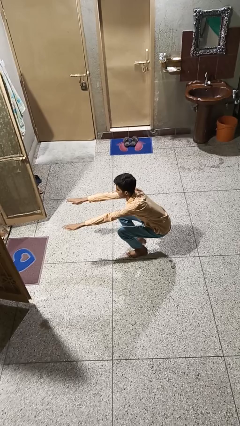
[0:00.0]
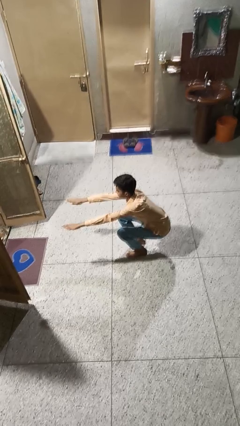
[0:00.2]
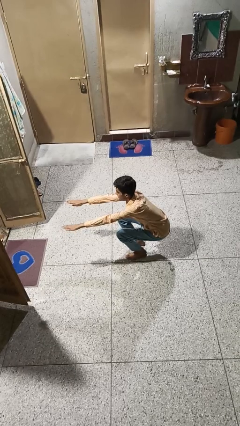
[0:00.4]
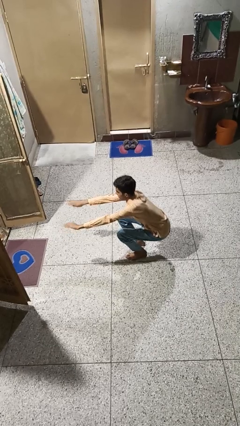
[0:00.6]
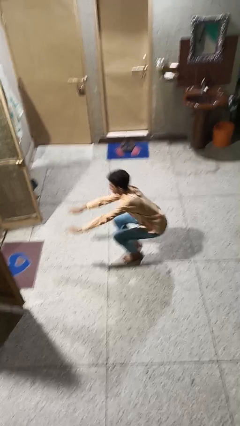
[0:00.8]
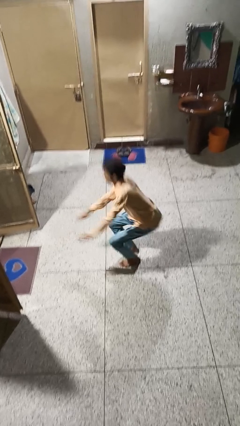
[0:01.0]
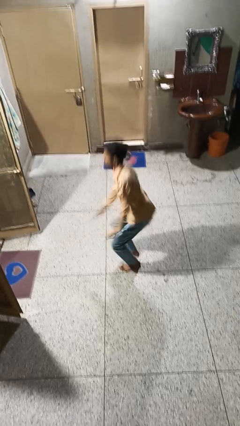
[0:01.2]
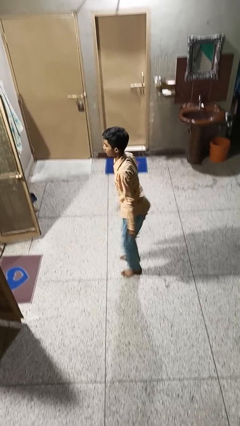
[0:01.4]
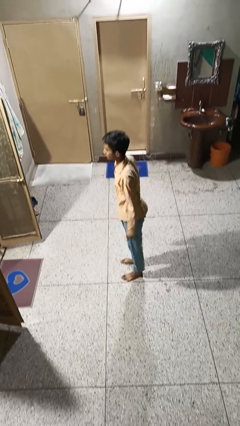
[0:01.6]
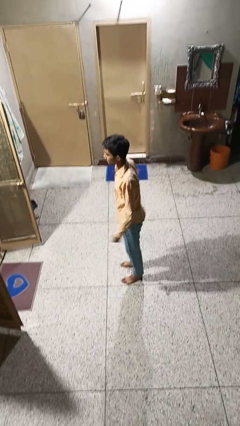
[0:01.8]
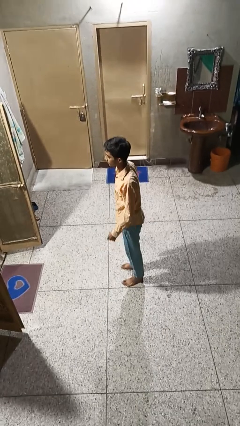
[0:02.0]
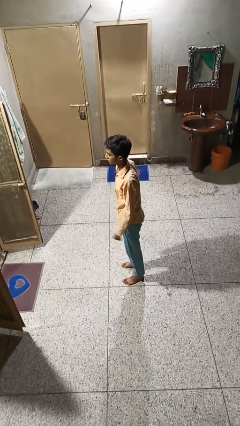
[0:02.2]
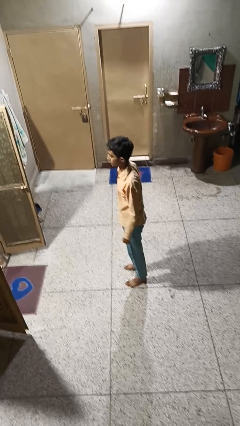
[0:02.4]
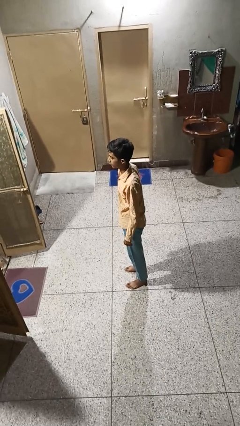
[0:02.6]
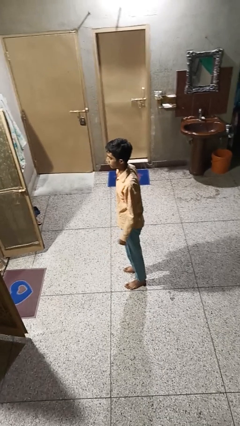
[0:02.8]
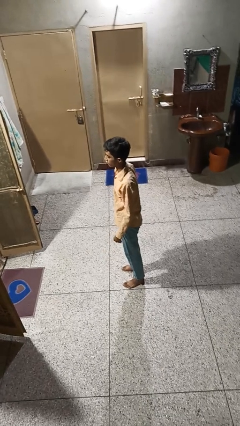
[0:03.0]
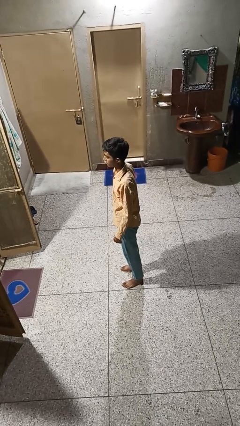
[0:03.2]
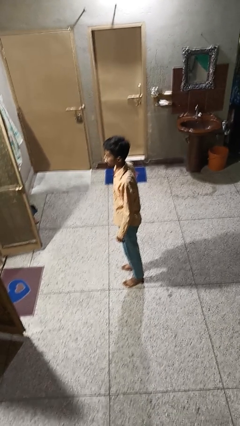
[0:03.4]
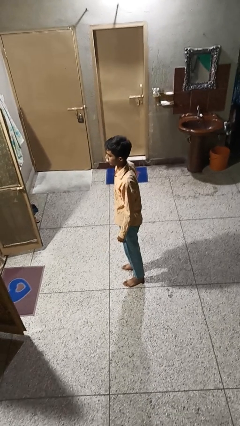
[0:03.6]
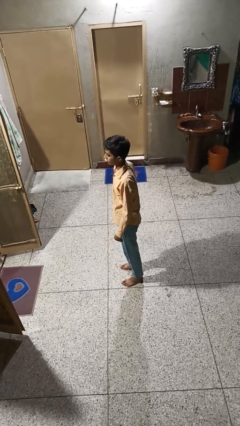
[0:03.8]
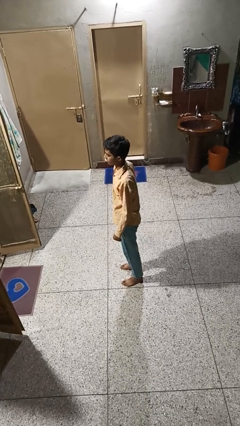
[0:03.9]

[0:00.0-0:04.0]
person stands up

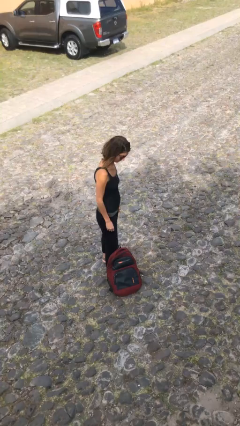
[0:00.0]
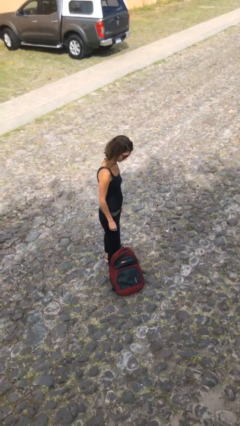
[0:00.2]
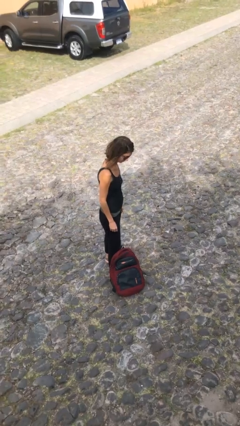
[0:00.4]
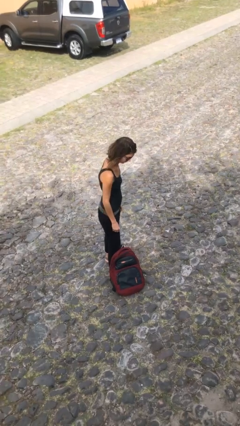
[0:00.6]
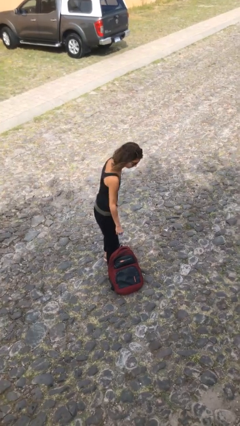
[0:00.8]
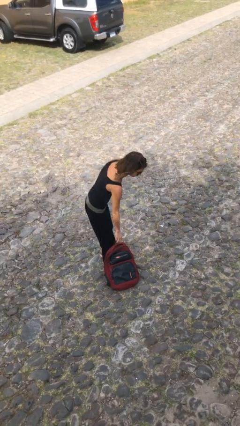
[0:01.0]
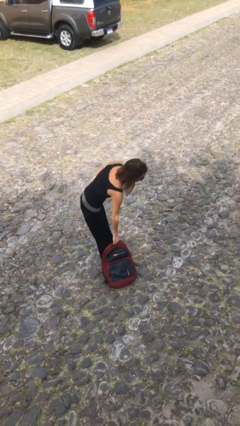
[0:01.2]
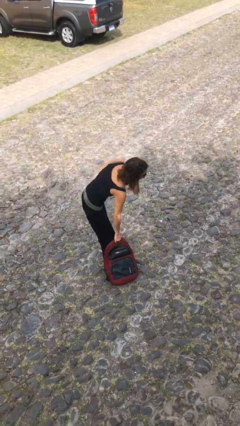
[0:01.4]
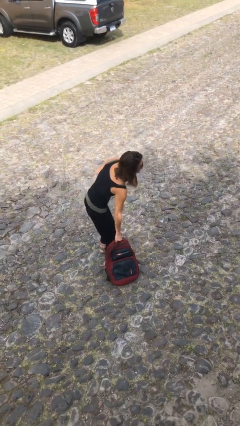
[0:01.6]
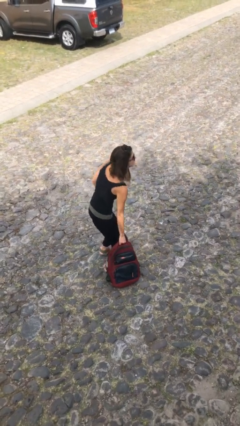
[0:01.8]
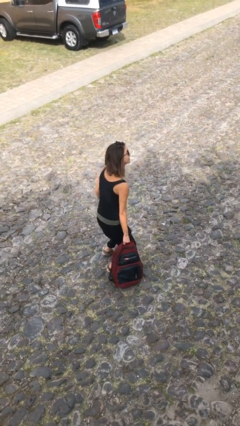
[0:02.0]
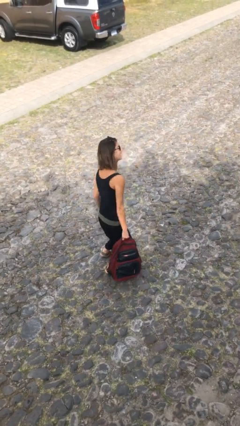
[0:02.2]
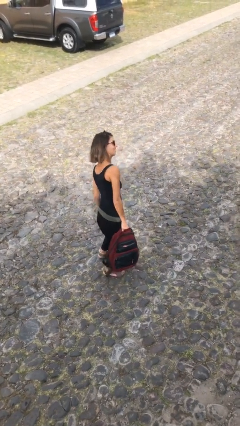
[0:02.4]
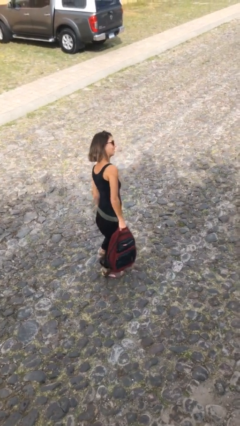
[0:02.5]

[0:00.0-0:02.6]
person picks up object from floor

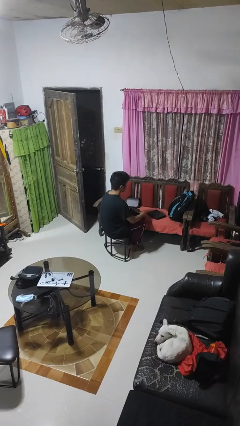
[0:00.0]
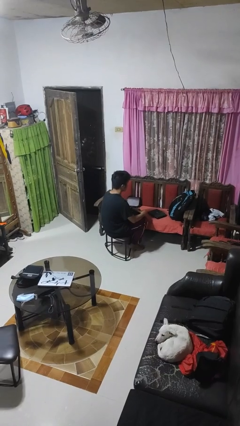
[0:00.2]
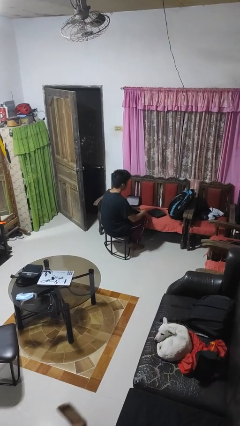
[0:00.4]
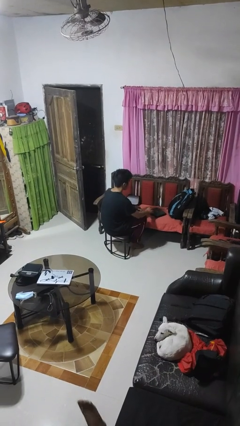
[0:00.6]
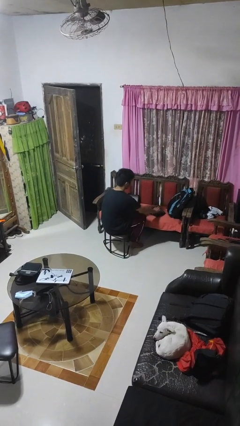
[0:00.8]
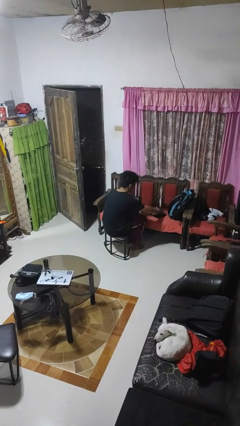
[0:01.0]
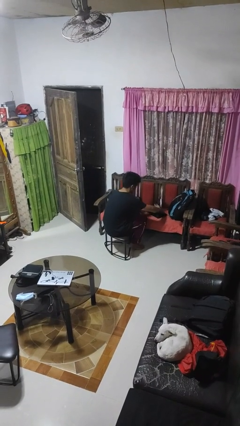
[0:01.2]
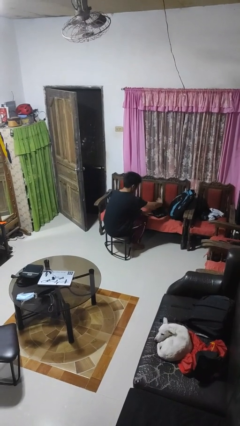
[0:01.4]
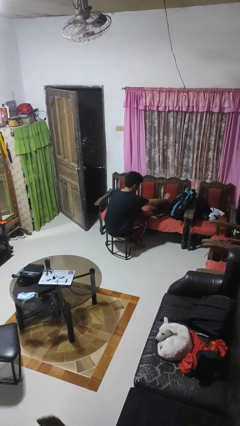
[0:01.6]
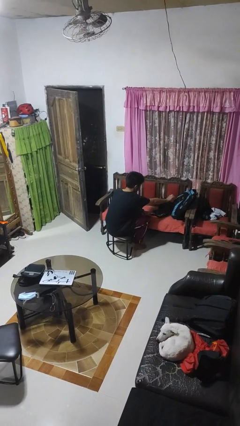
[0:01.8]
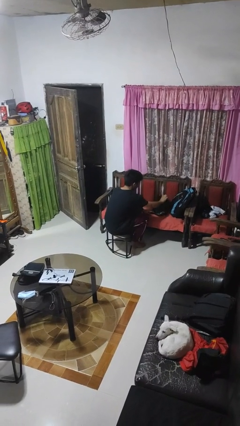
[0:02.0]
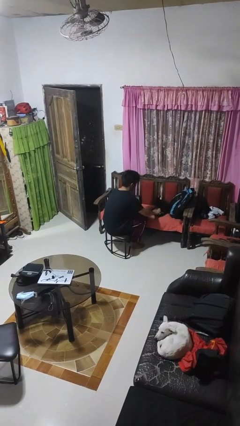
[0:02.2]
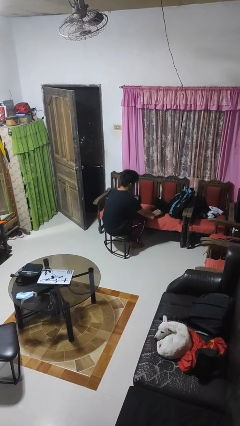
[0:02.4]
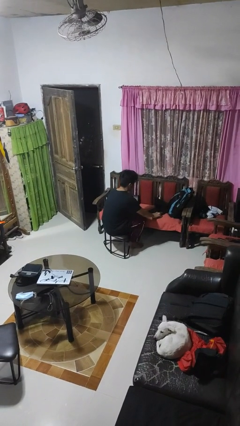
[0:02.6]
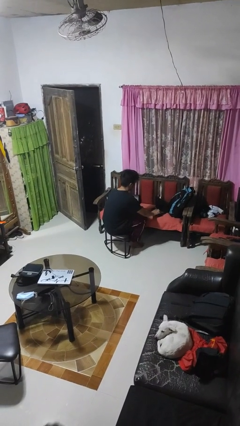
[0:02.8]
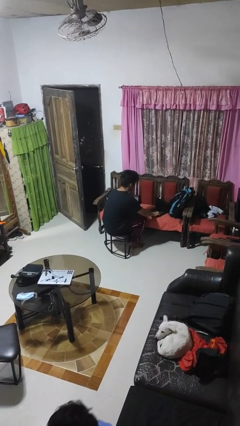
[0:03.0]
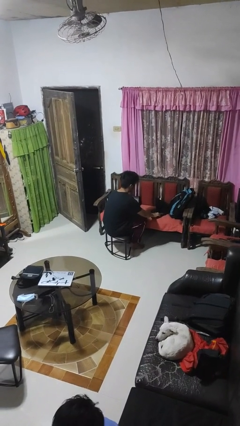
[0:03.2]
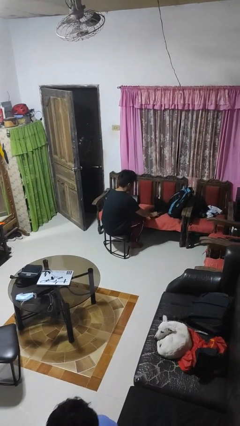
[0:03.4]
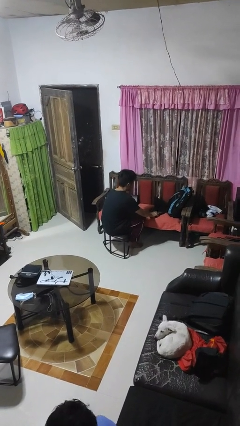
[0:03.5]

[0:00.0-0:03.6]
person opens laptop

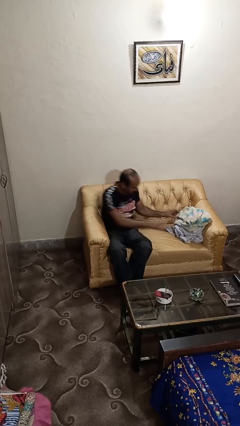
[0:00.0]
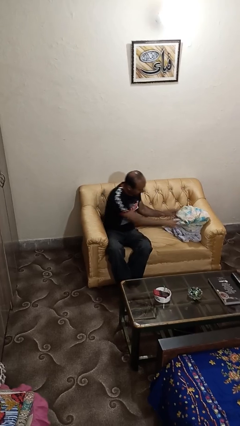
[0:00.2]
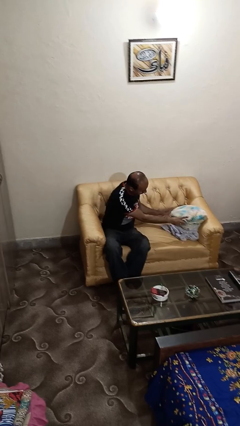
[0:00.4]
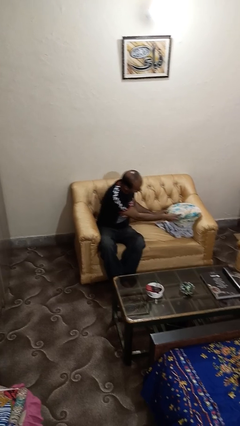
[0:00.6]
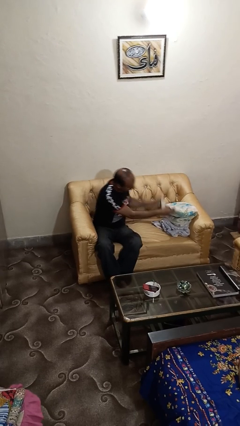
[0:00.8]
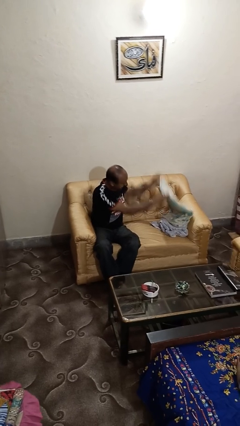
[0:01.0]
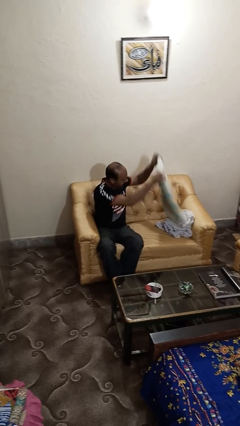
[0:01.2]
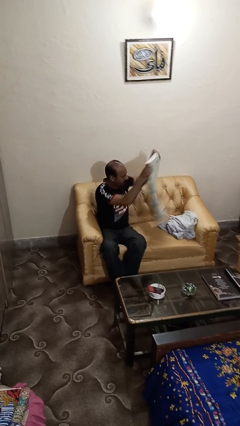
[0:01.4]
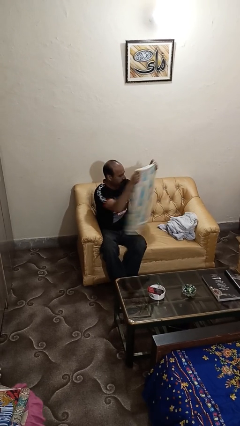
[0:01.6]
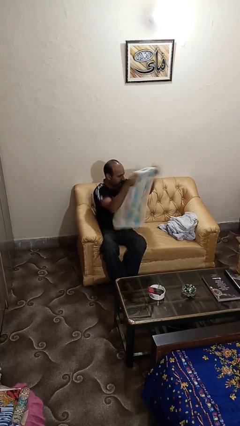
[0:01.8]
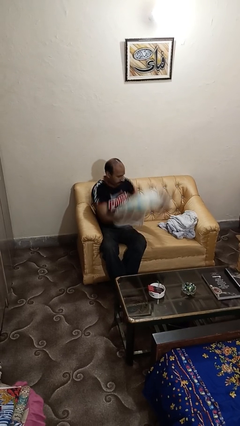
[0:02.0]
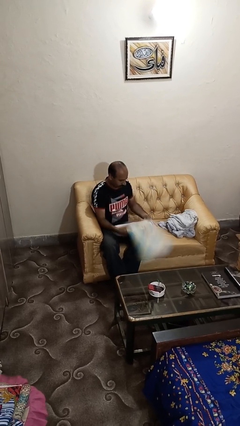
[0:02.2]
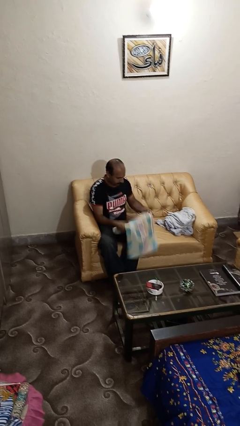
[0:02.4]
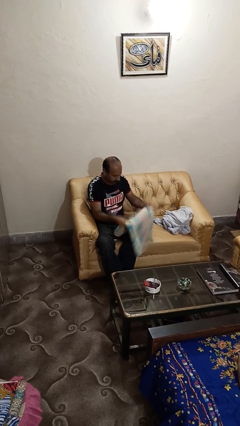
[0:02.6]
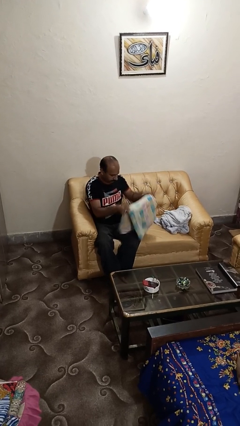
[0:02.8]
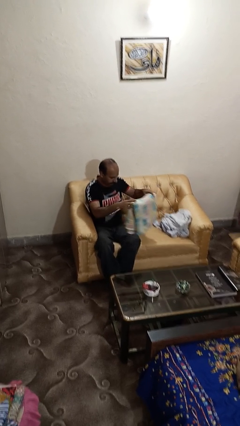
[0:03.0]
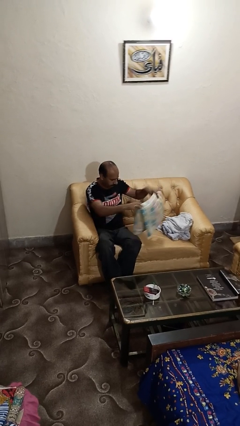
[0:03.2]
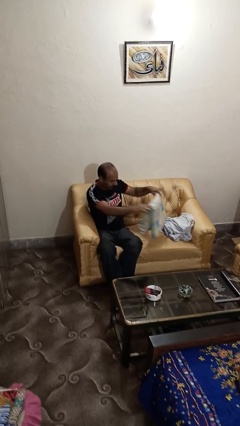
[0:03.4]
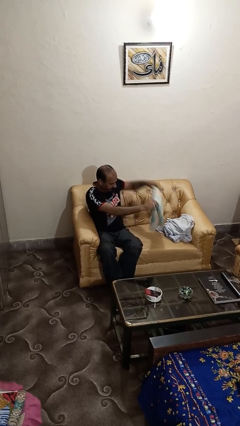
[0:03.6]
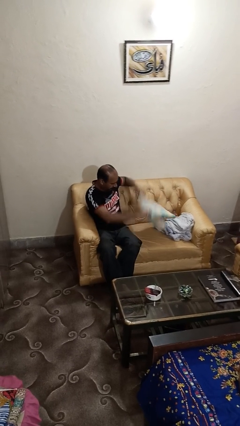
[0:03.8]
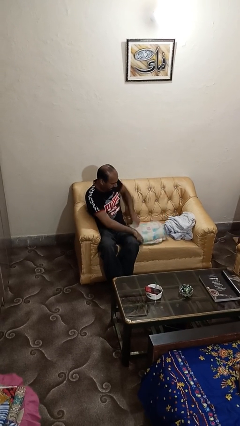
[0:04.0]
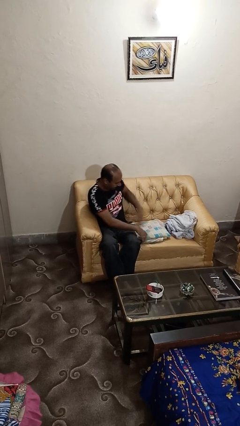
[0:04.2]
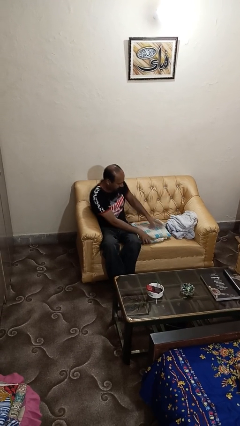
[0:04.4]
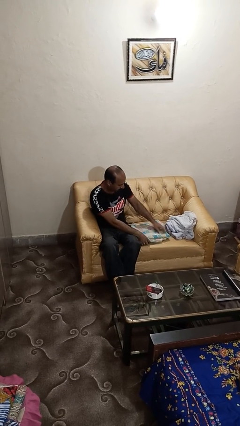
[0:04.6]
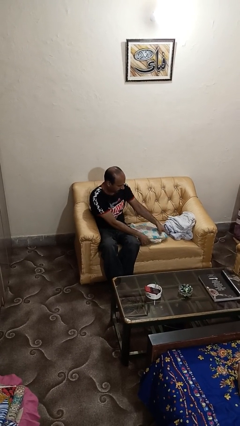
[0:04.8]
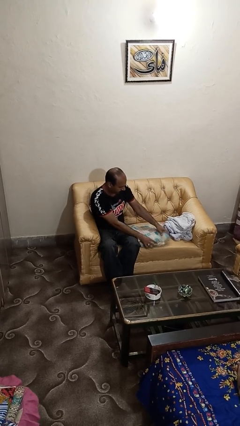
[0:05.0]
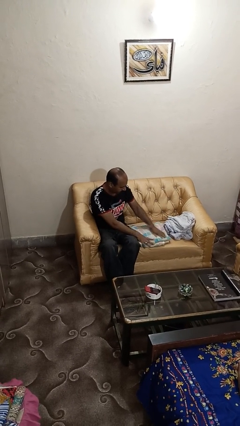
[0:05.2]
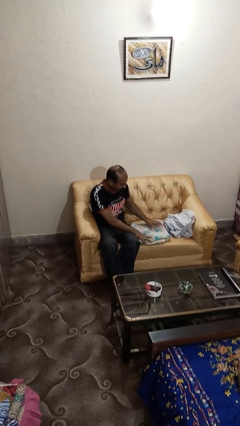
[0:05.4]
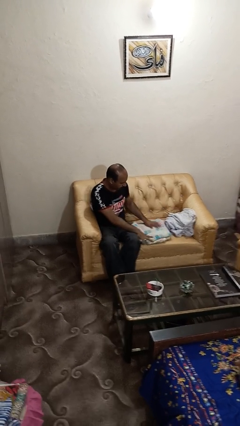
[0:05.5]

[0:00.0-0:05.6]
person folds towel

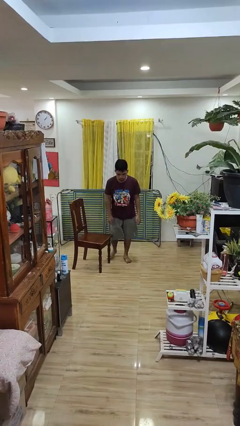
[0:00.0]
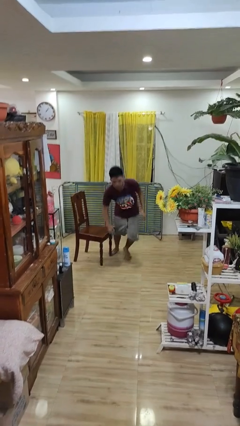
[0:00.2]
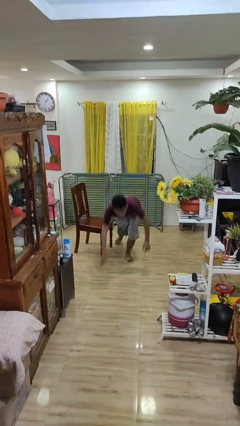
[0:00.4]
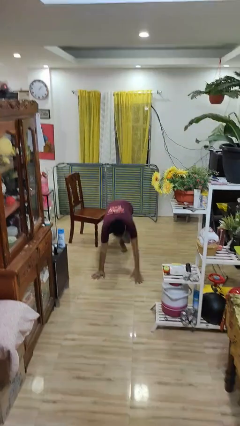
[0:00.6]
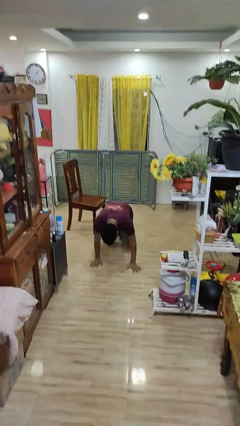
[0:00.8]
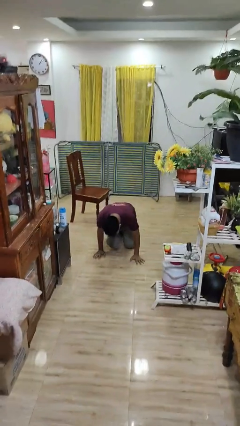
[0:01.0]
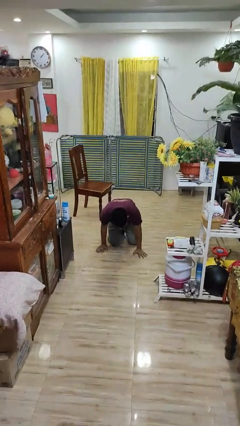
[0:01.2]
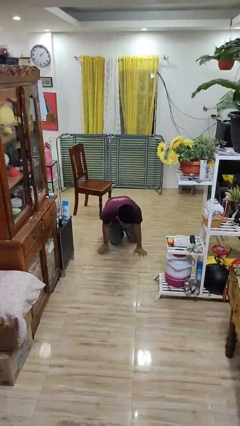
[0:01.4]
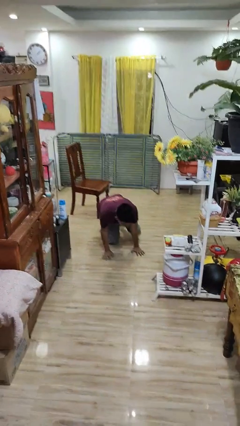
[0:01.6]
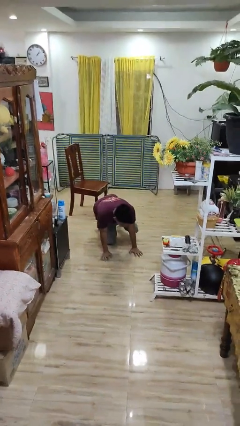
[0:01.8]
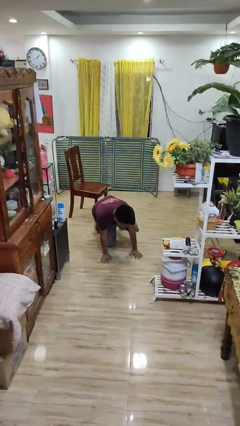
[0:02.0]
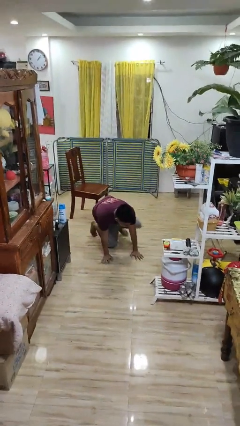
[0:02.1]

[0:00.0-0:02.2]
person trips on object on floor

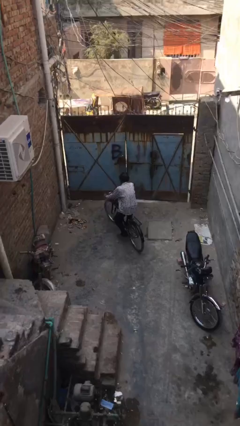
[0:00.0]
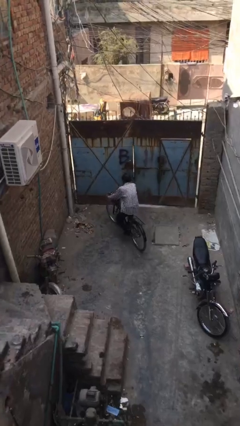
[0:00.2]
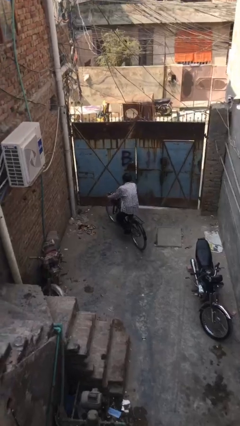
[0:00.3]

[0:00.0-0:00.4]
person rides bicycle
